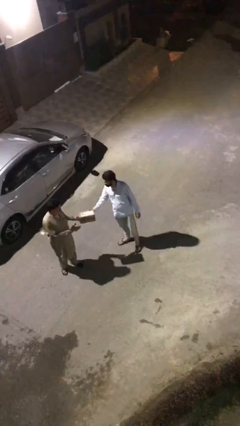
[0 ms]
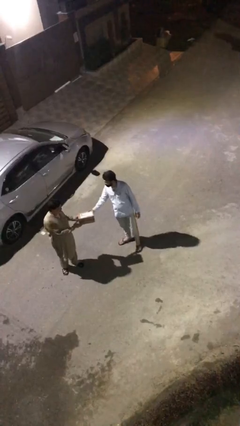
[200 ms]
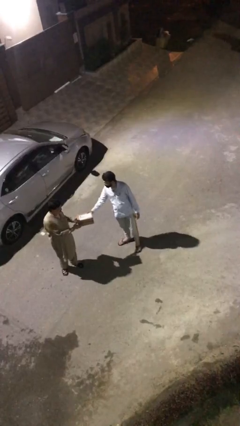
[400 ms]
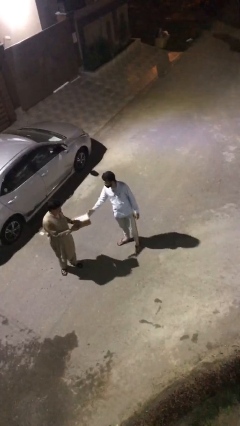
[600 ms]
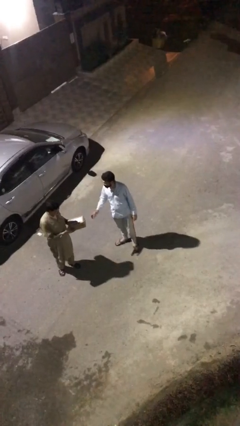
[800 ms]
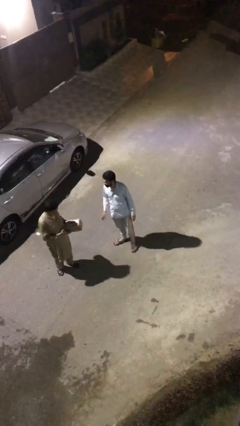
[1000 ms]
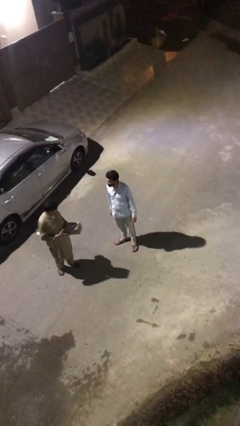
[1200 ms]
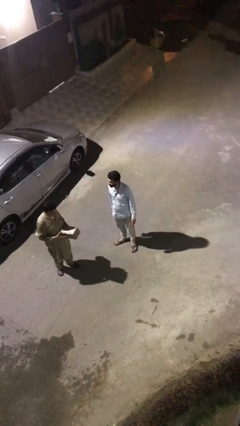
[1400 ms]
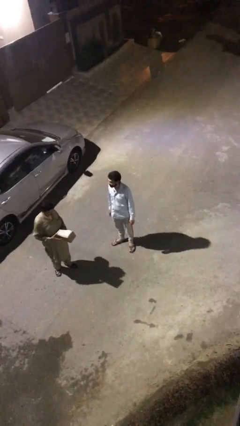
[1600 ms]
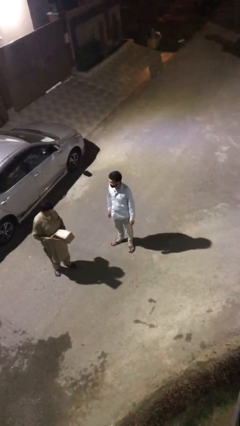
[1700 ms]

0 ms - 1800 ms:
person transfers object to person

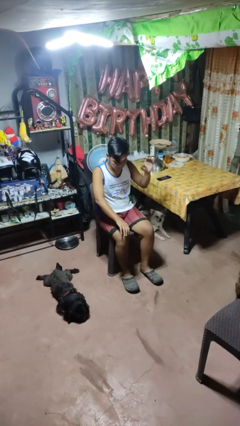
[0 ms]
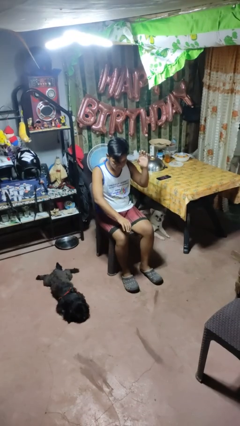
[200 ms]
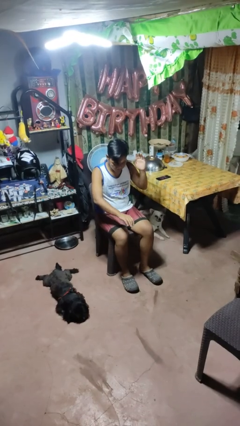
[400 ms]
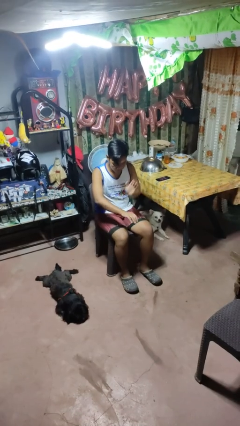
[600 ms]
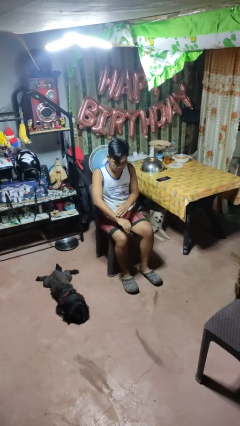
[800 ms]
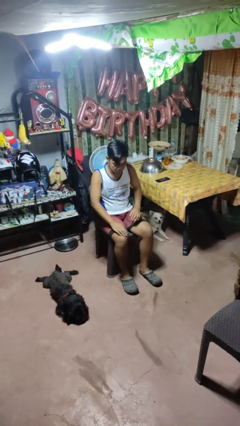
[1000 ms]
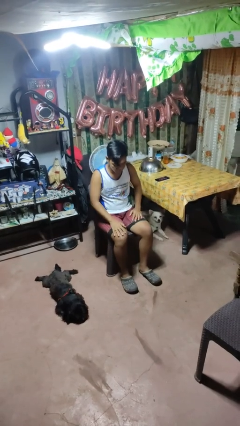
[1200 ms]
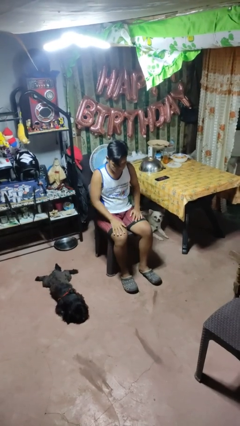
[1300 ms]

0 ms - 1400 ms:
person swats bug

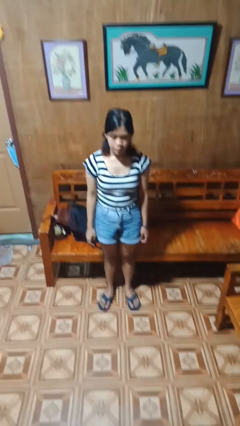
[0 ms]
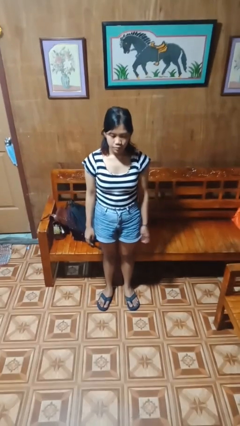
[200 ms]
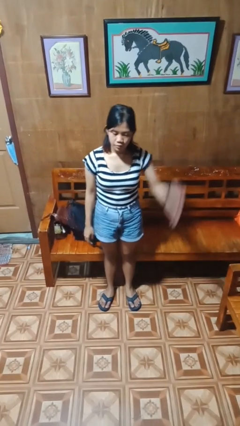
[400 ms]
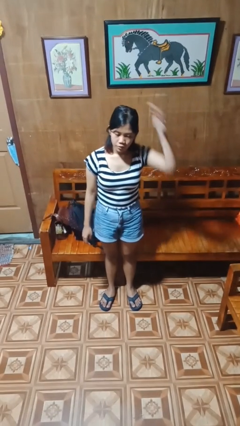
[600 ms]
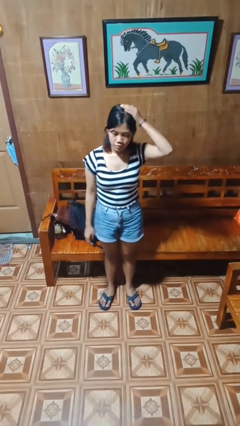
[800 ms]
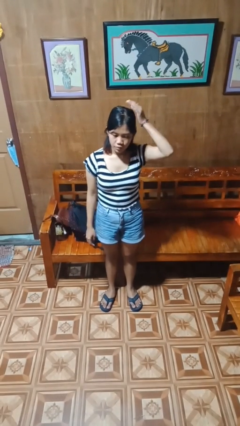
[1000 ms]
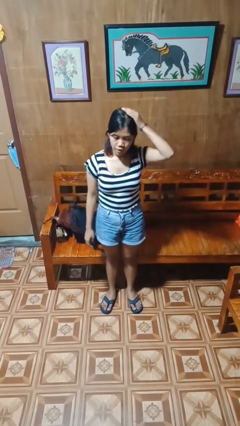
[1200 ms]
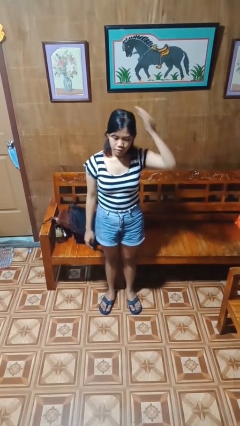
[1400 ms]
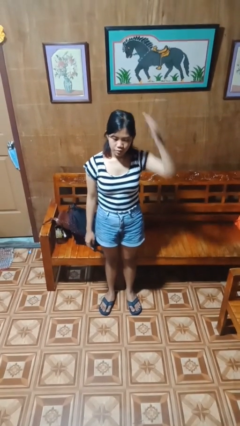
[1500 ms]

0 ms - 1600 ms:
person pats head

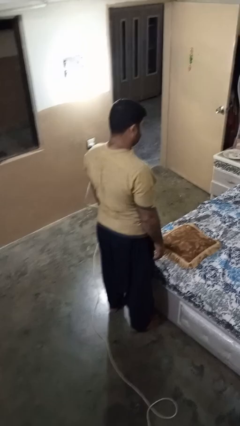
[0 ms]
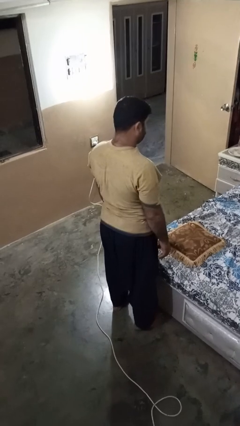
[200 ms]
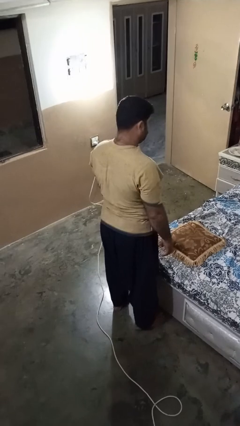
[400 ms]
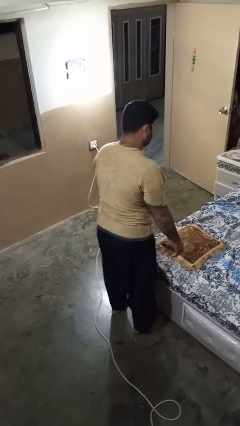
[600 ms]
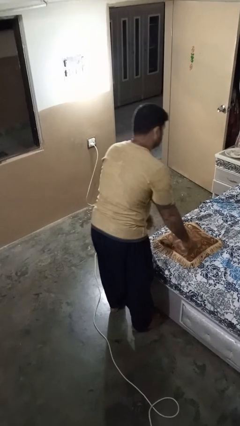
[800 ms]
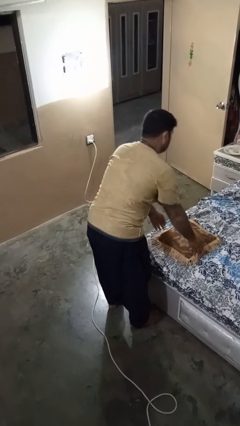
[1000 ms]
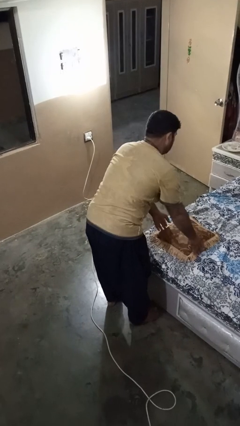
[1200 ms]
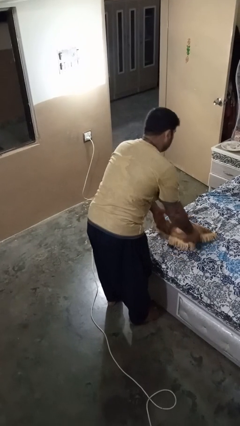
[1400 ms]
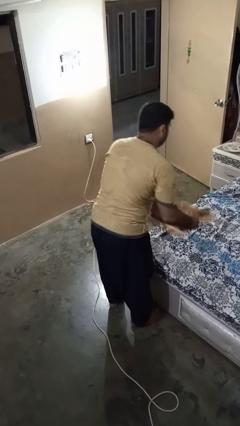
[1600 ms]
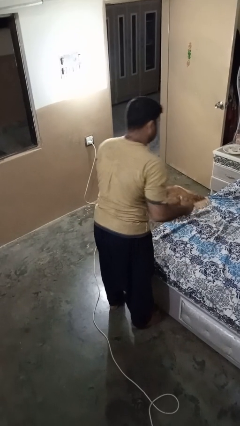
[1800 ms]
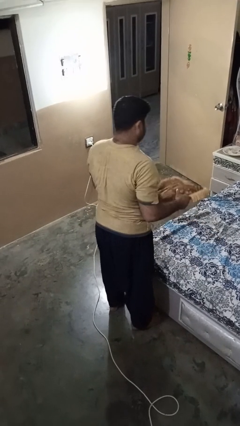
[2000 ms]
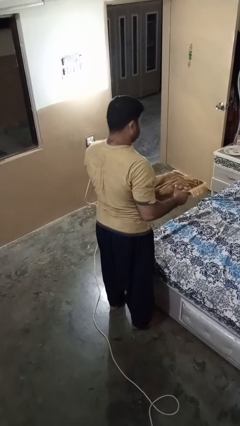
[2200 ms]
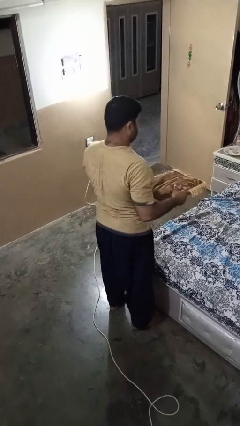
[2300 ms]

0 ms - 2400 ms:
person picks up object from bed

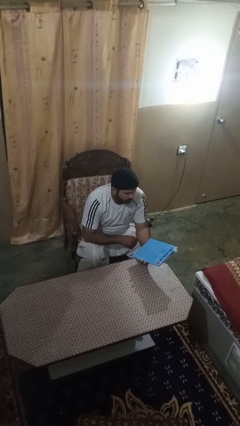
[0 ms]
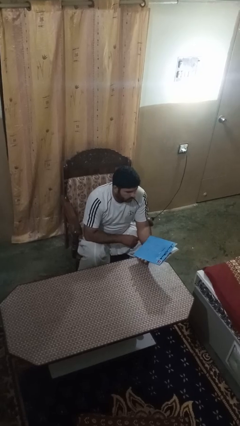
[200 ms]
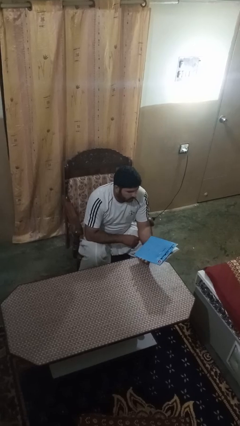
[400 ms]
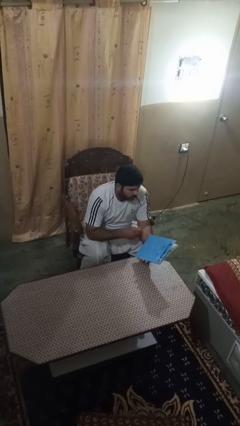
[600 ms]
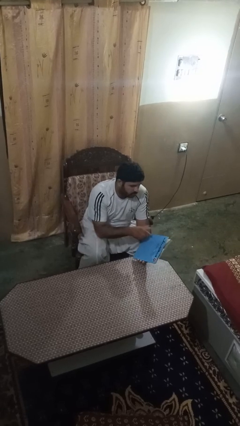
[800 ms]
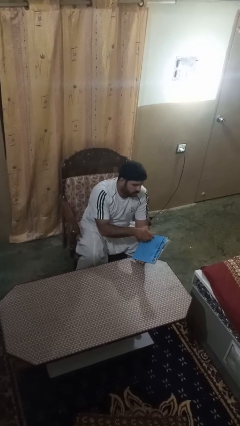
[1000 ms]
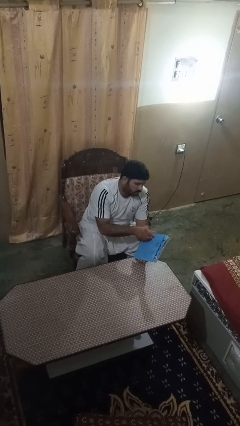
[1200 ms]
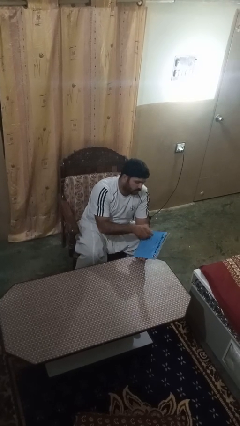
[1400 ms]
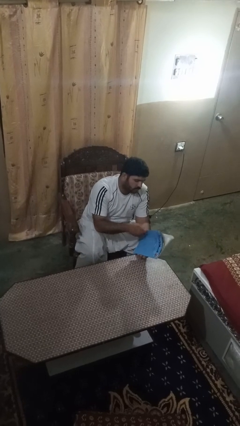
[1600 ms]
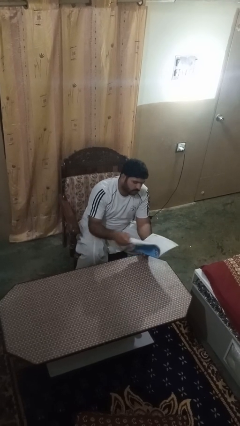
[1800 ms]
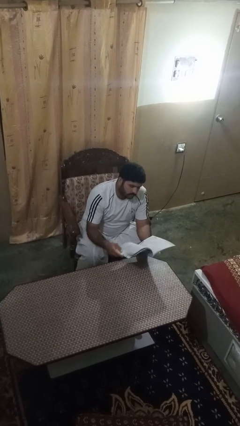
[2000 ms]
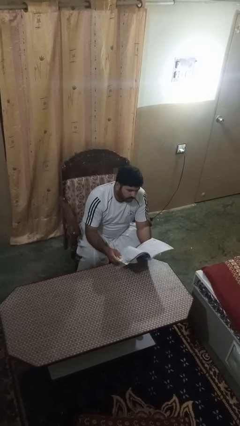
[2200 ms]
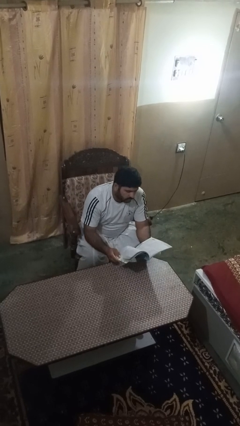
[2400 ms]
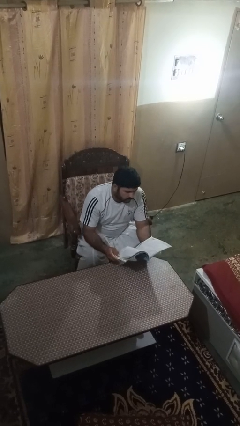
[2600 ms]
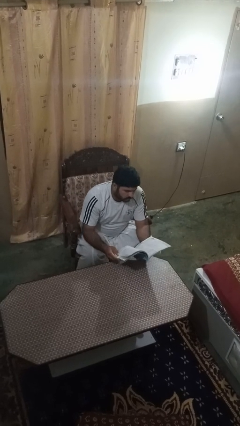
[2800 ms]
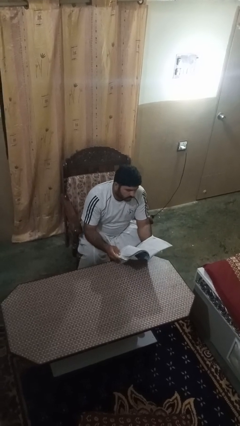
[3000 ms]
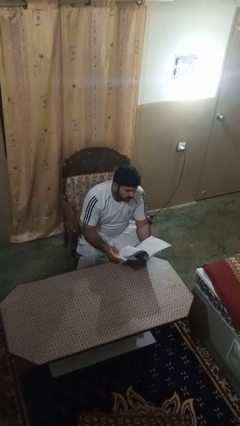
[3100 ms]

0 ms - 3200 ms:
person reads magazine

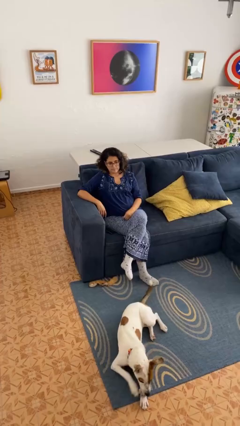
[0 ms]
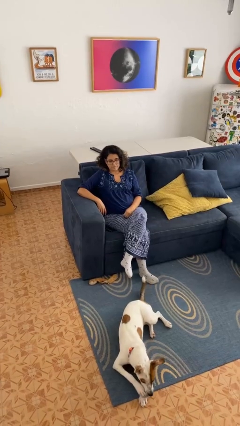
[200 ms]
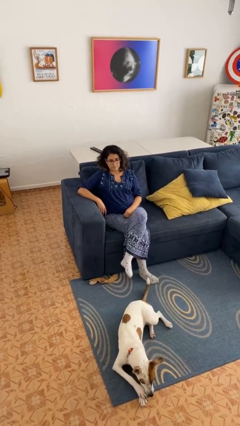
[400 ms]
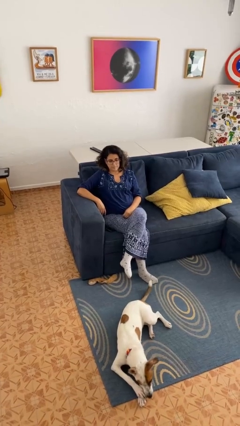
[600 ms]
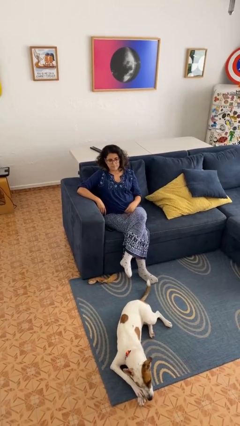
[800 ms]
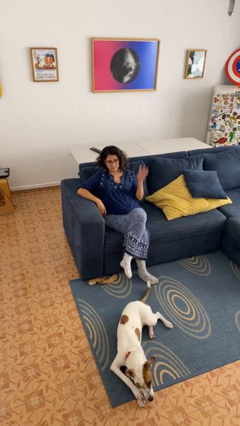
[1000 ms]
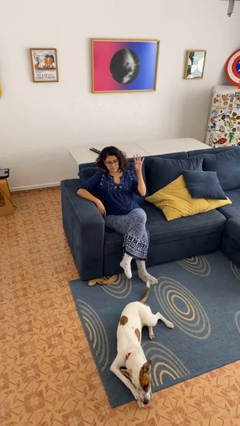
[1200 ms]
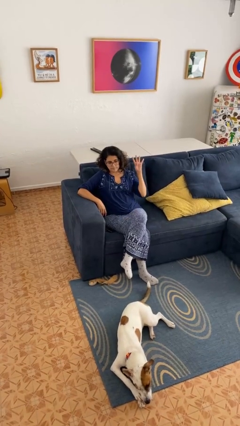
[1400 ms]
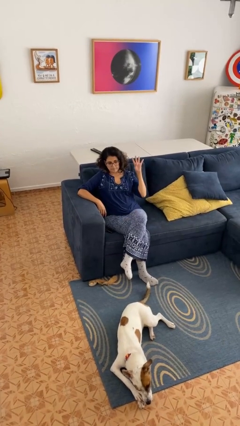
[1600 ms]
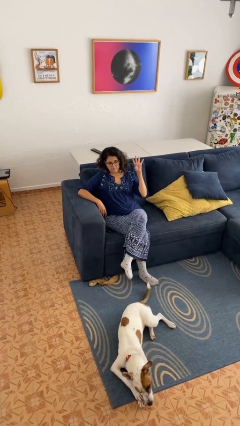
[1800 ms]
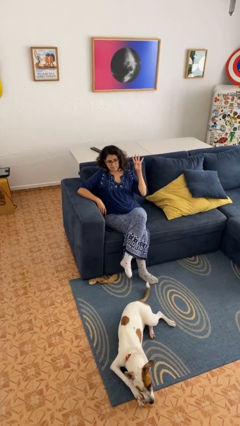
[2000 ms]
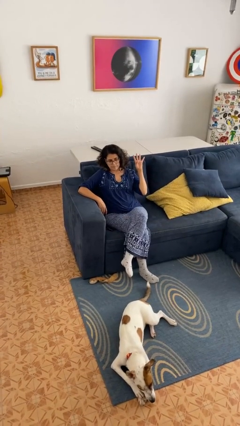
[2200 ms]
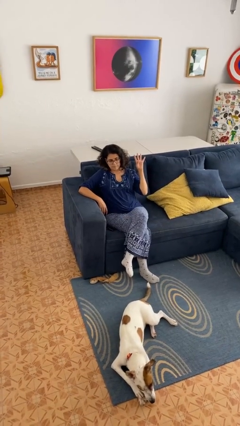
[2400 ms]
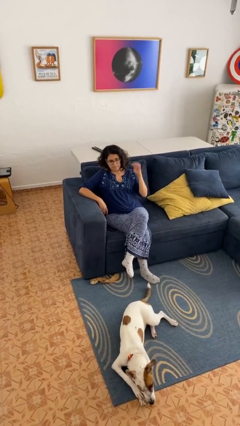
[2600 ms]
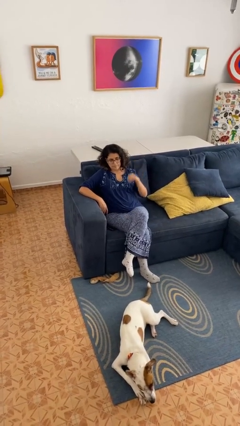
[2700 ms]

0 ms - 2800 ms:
person gestures number four

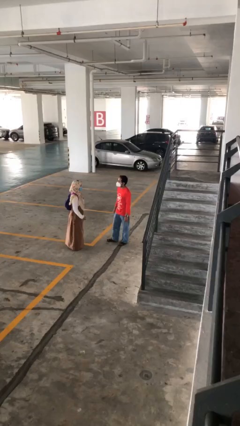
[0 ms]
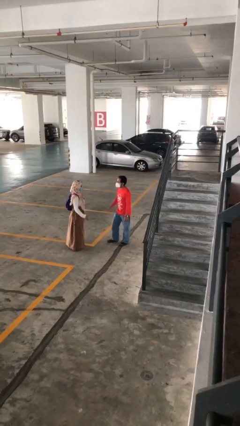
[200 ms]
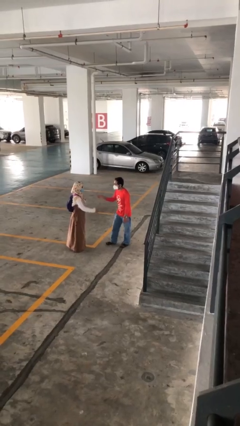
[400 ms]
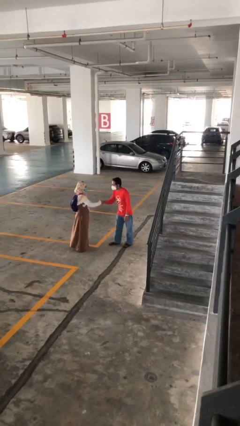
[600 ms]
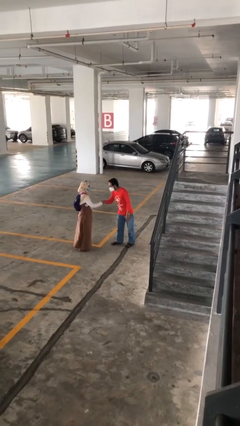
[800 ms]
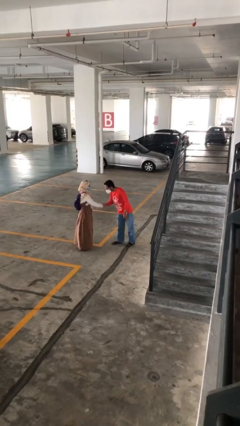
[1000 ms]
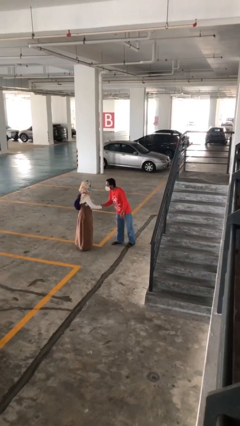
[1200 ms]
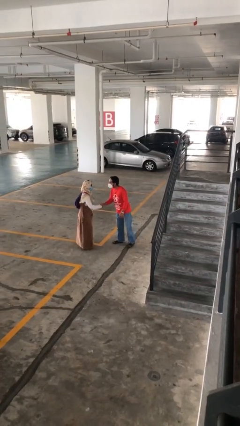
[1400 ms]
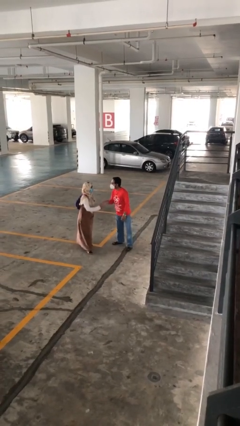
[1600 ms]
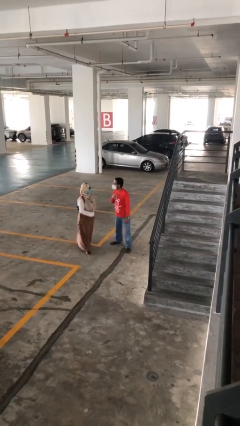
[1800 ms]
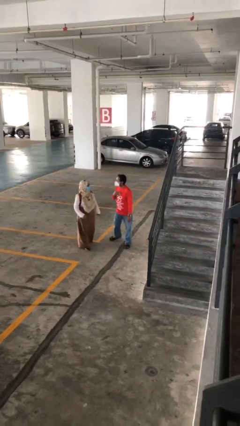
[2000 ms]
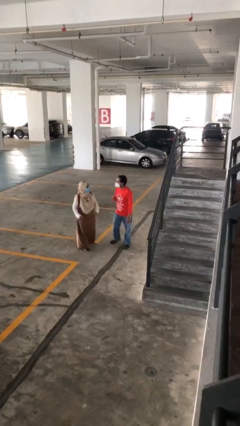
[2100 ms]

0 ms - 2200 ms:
person shakes hand

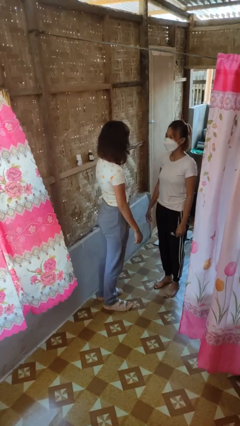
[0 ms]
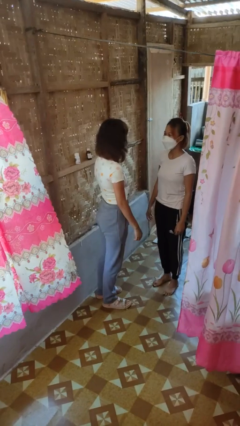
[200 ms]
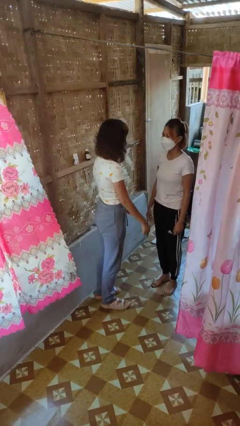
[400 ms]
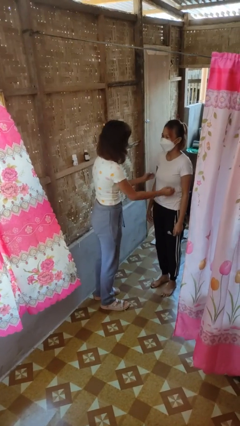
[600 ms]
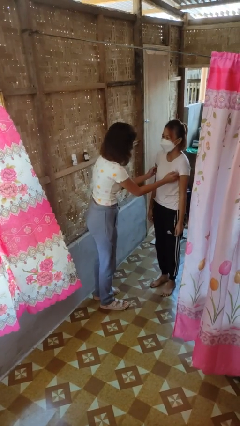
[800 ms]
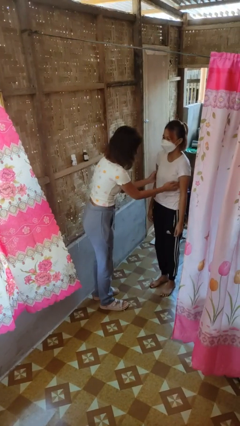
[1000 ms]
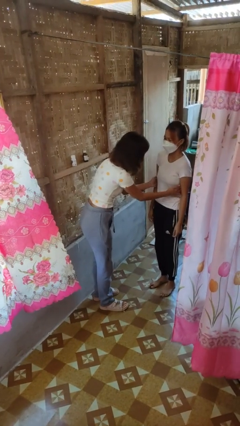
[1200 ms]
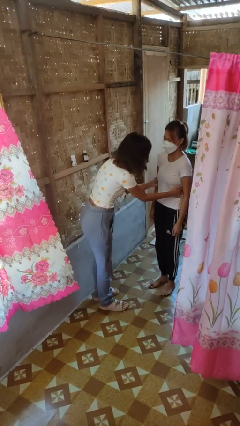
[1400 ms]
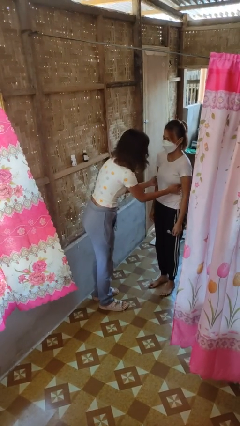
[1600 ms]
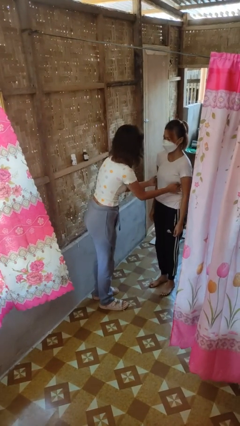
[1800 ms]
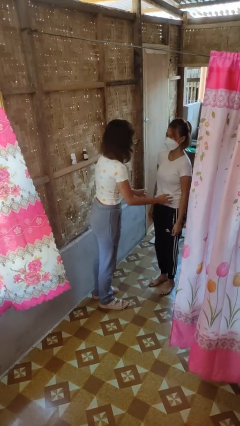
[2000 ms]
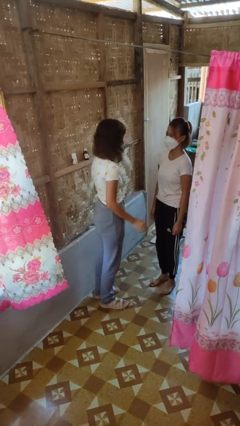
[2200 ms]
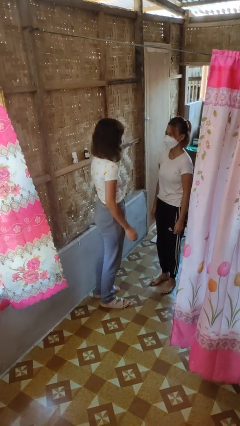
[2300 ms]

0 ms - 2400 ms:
person tickles person
